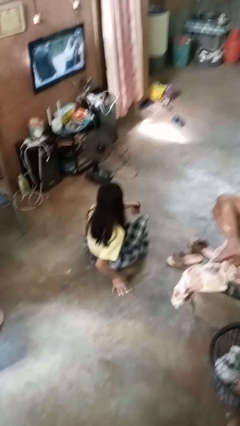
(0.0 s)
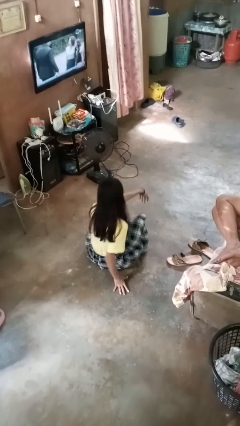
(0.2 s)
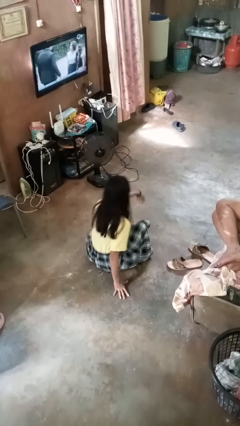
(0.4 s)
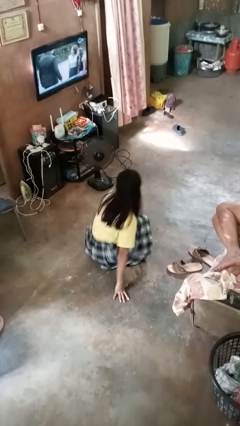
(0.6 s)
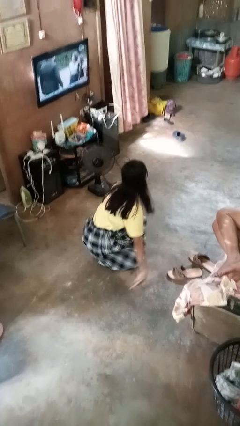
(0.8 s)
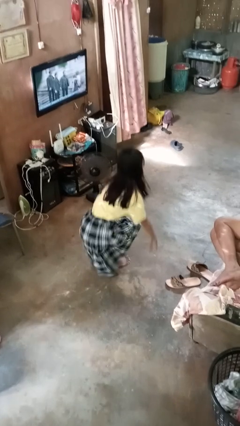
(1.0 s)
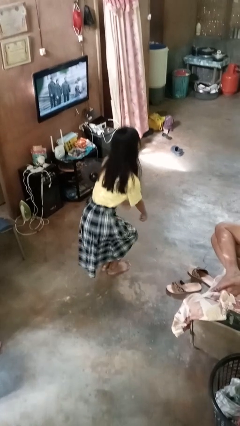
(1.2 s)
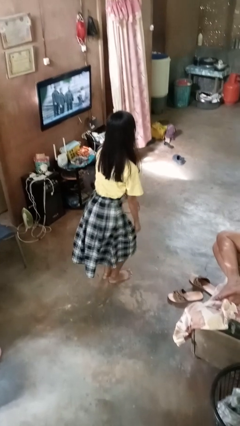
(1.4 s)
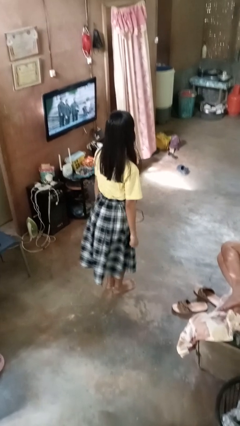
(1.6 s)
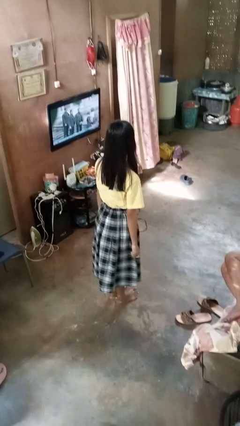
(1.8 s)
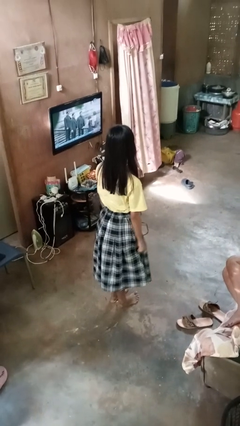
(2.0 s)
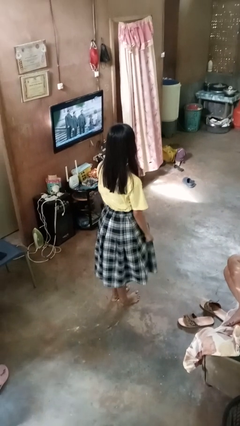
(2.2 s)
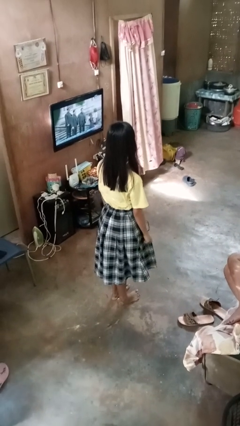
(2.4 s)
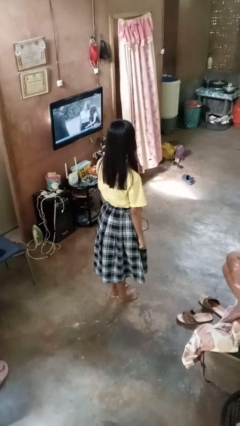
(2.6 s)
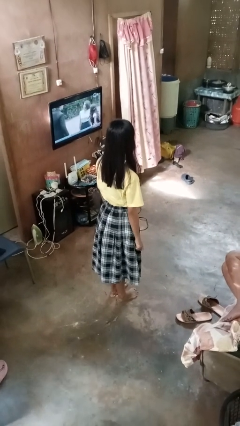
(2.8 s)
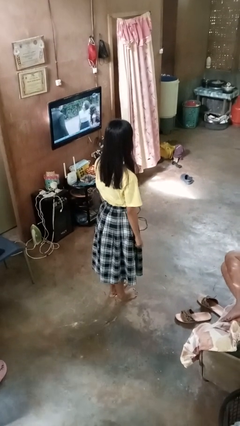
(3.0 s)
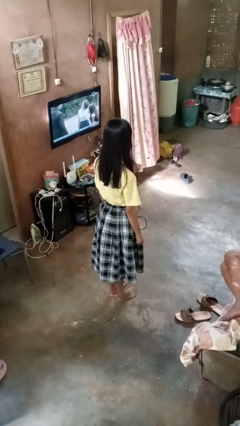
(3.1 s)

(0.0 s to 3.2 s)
person stands up from floor

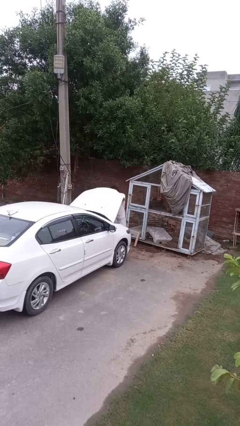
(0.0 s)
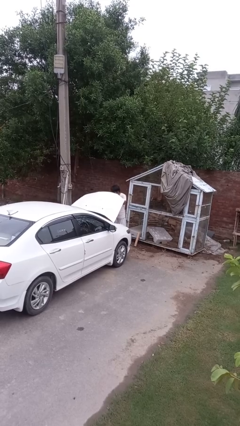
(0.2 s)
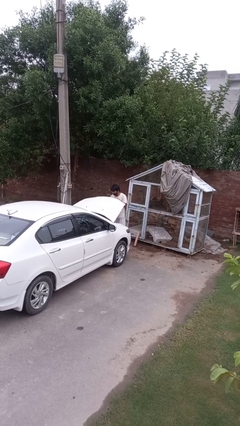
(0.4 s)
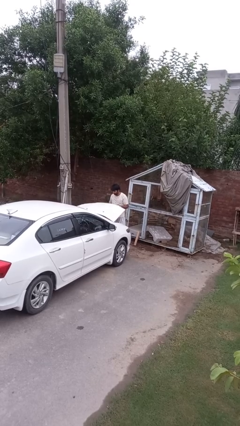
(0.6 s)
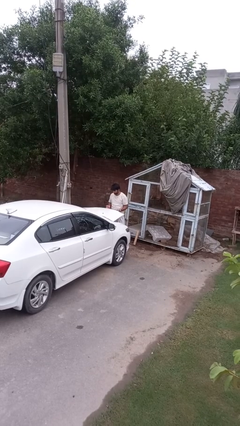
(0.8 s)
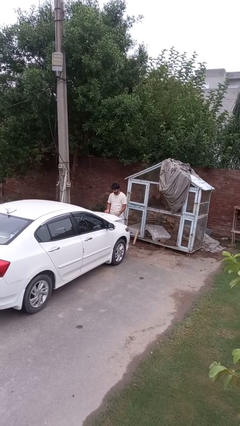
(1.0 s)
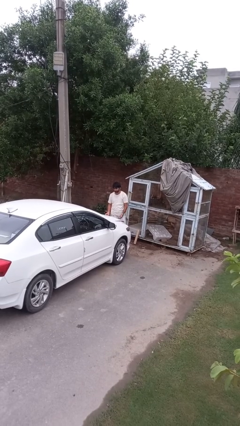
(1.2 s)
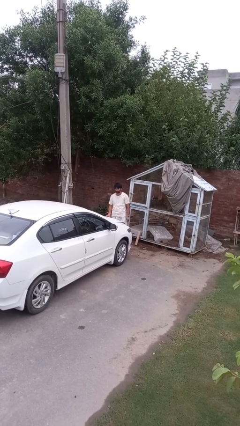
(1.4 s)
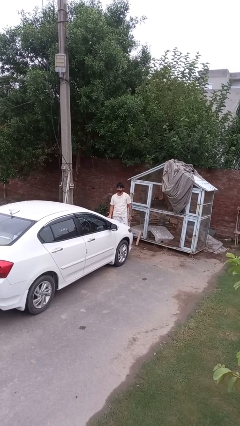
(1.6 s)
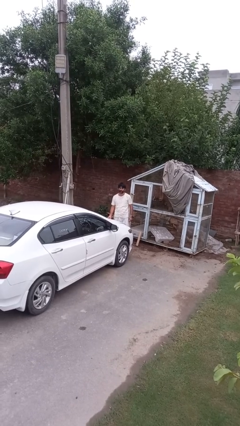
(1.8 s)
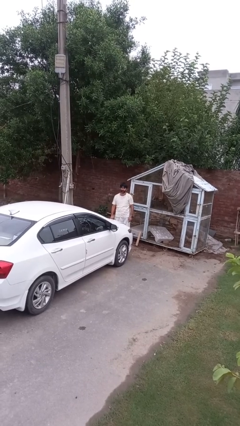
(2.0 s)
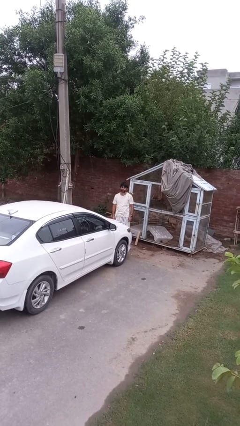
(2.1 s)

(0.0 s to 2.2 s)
person closes car hood

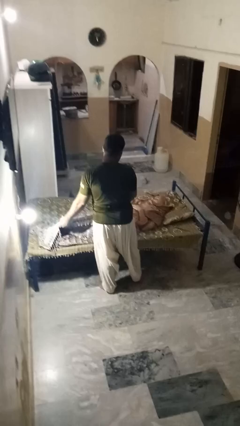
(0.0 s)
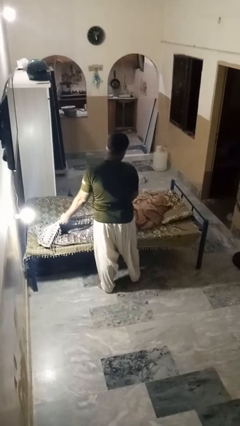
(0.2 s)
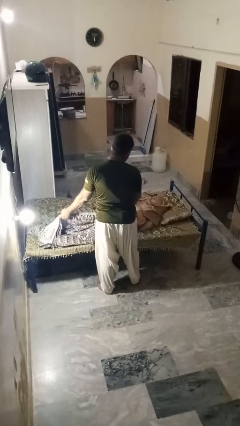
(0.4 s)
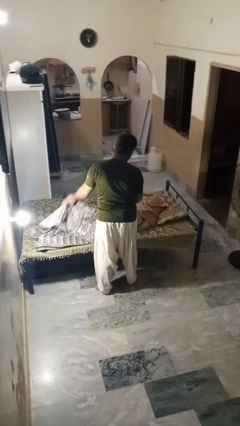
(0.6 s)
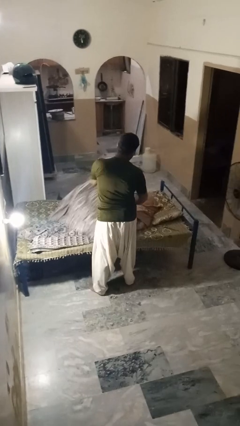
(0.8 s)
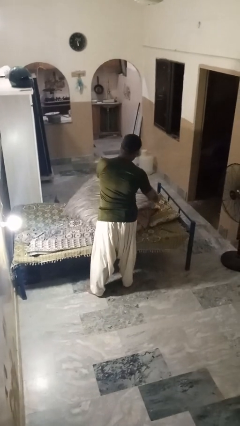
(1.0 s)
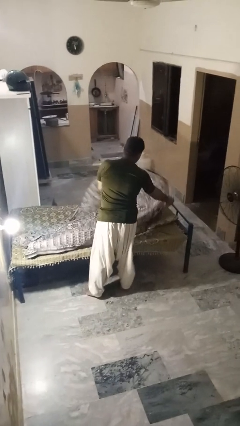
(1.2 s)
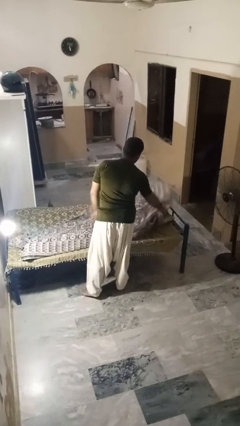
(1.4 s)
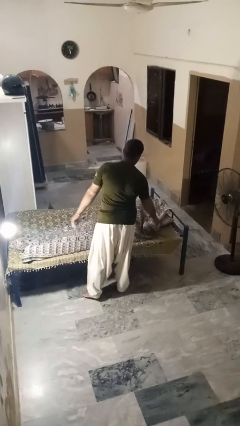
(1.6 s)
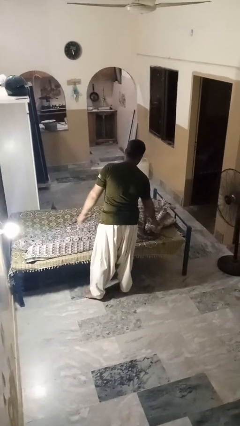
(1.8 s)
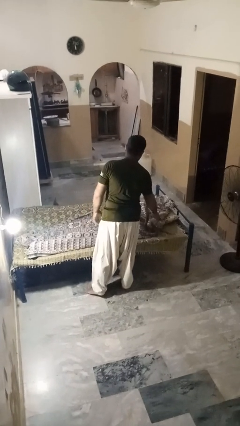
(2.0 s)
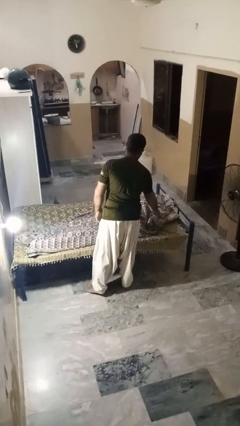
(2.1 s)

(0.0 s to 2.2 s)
person covers friend with blanket

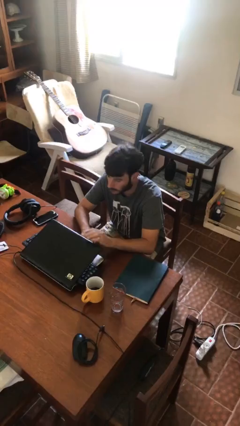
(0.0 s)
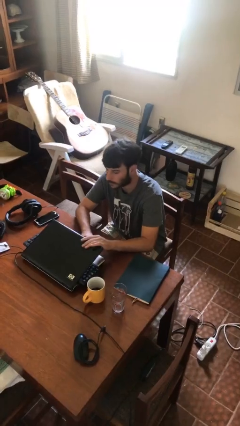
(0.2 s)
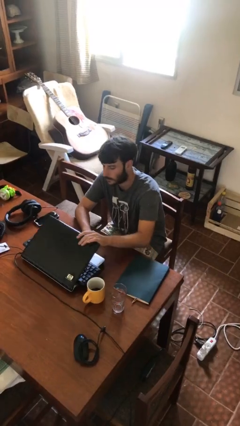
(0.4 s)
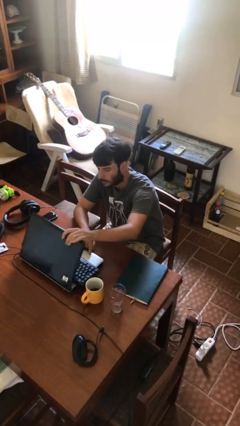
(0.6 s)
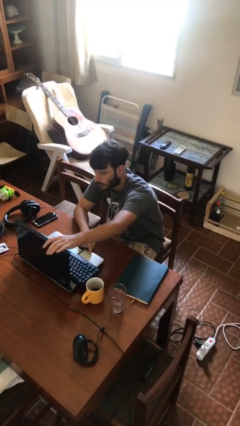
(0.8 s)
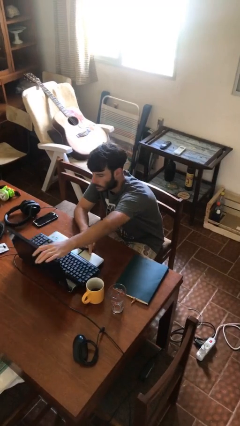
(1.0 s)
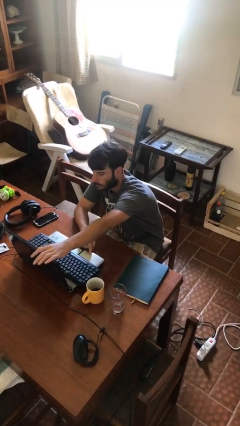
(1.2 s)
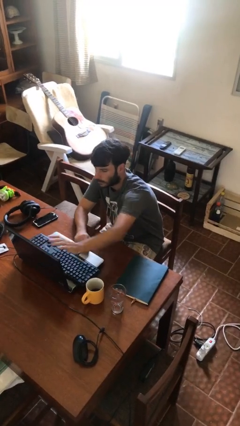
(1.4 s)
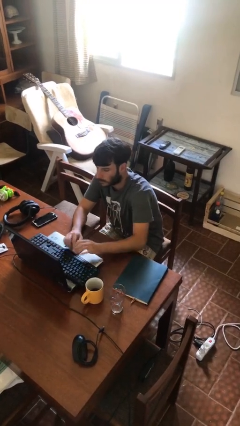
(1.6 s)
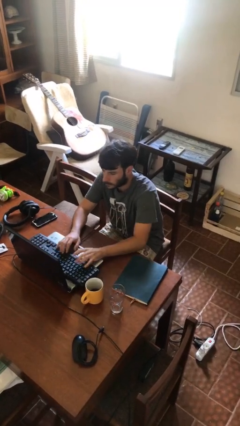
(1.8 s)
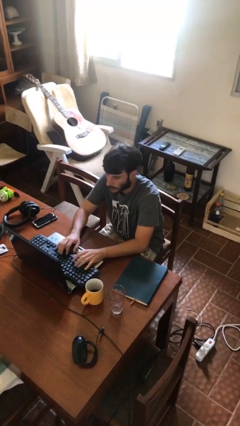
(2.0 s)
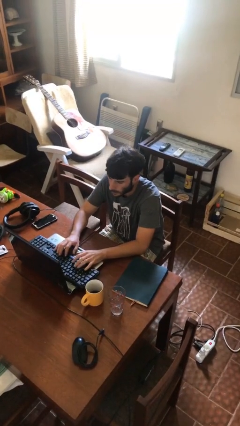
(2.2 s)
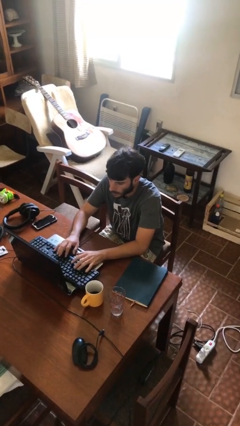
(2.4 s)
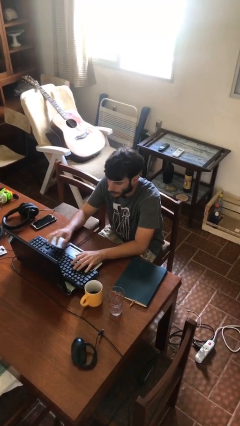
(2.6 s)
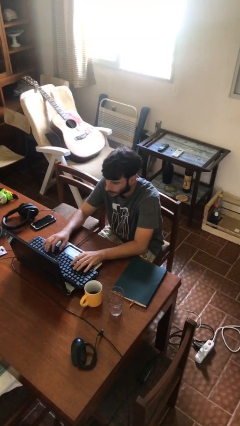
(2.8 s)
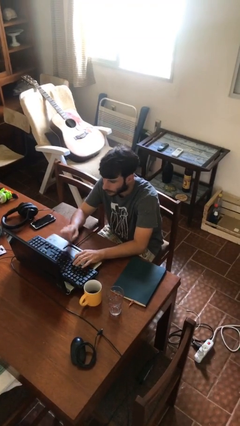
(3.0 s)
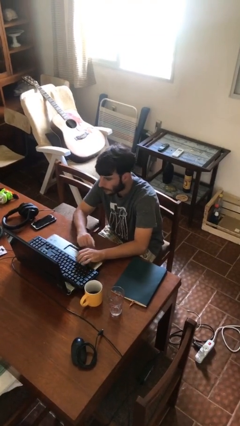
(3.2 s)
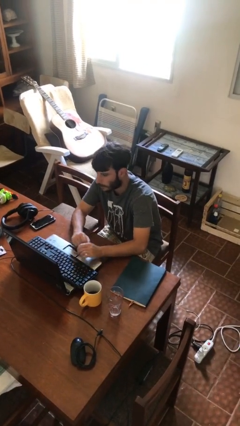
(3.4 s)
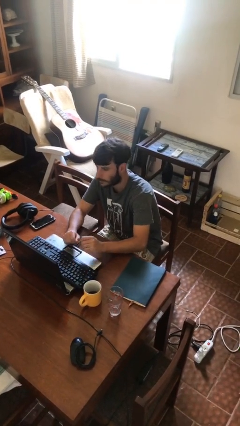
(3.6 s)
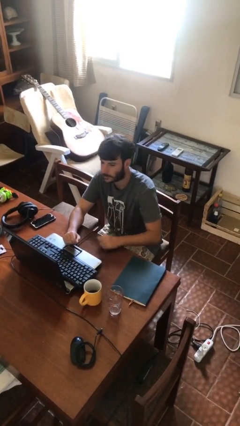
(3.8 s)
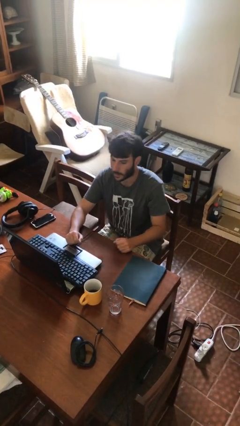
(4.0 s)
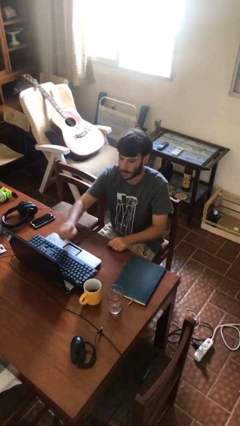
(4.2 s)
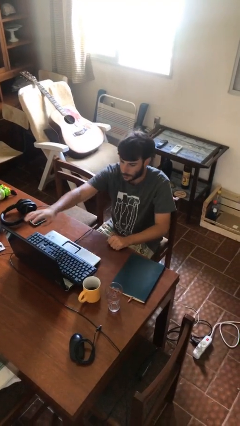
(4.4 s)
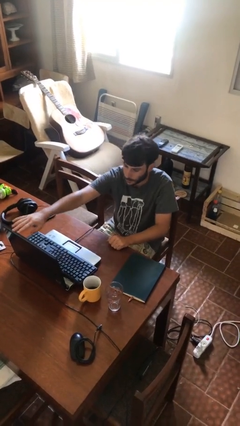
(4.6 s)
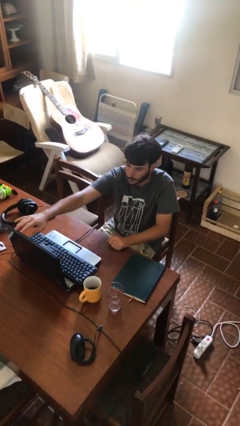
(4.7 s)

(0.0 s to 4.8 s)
person interacts with laptop

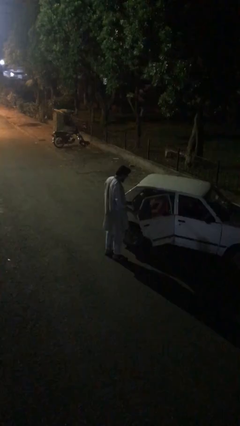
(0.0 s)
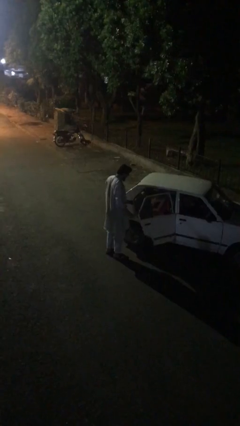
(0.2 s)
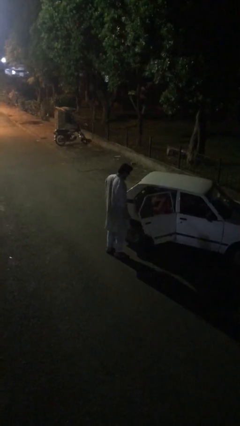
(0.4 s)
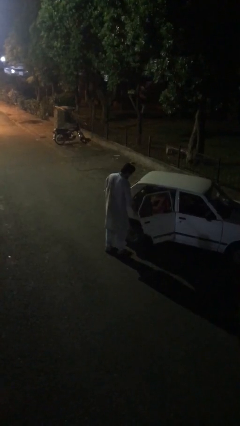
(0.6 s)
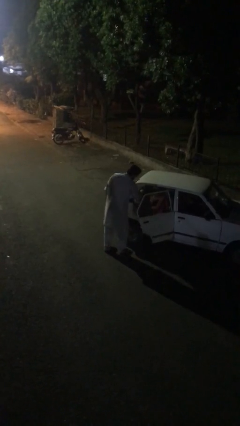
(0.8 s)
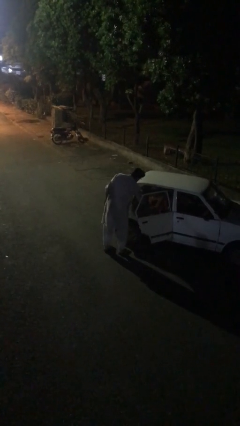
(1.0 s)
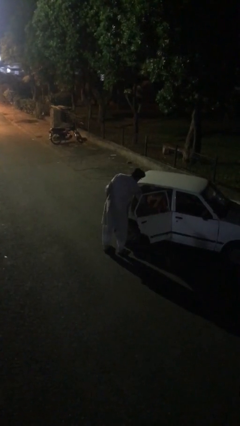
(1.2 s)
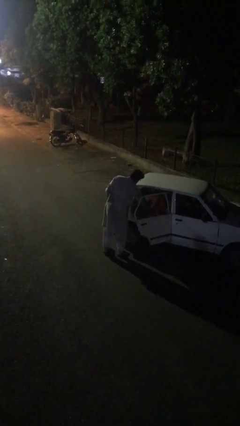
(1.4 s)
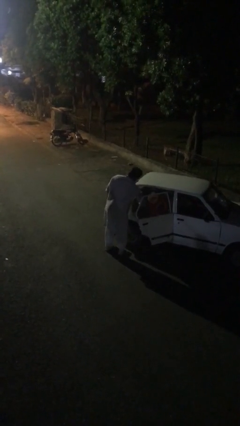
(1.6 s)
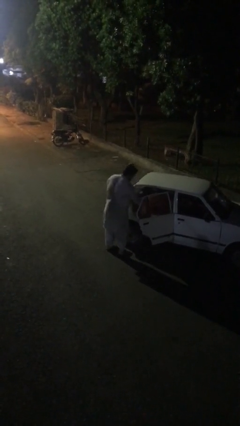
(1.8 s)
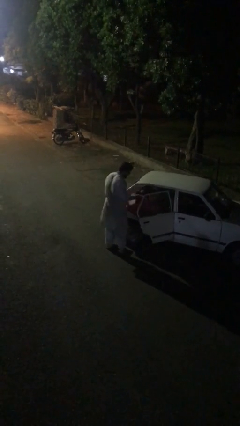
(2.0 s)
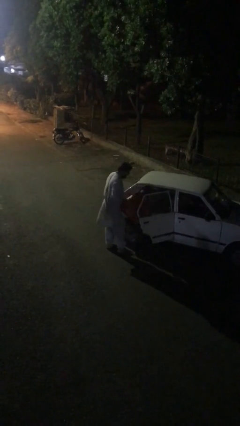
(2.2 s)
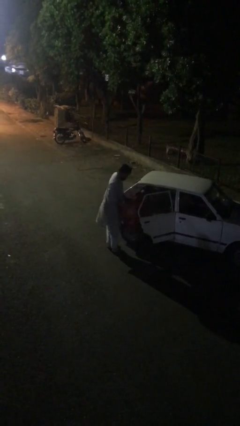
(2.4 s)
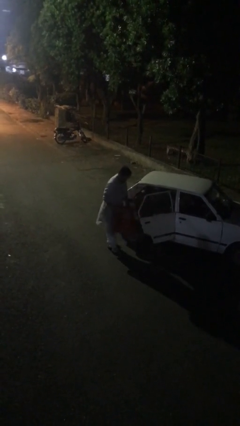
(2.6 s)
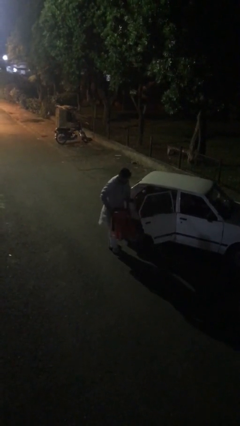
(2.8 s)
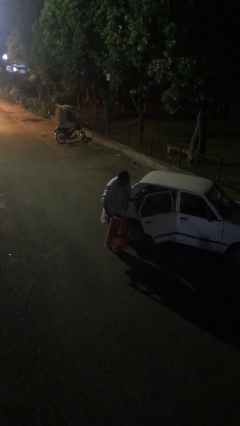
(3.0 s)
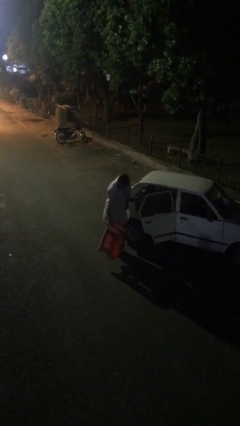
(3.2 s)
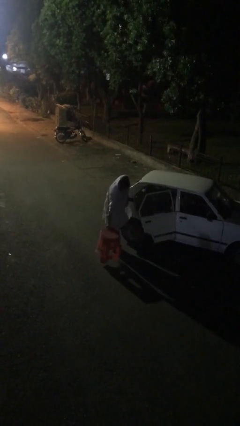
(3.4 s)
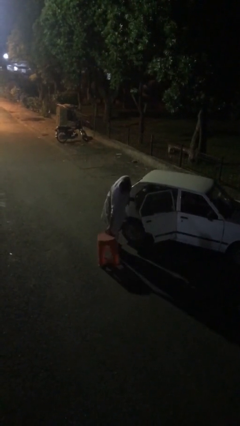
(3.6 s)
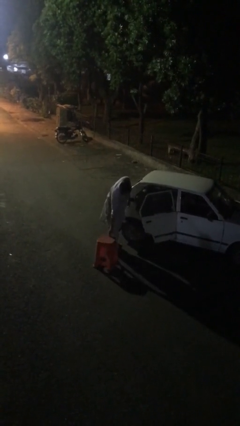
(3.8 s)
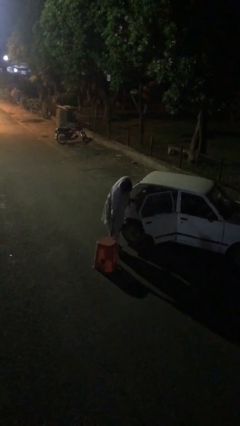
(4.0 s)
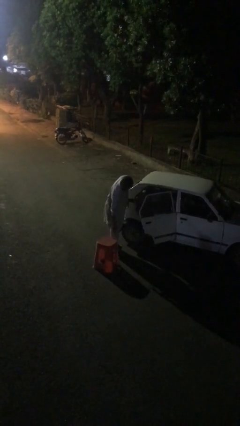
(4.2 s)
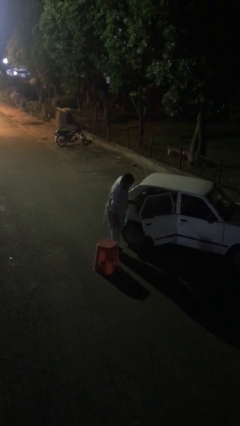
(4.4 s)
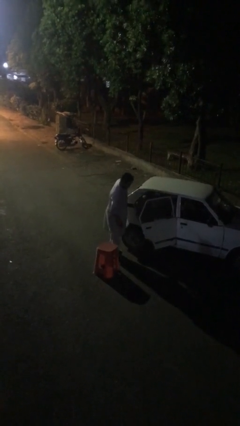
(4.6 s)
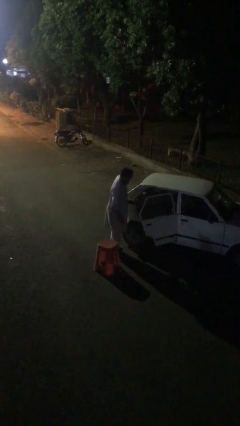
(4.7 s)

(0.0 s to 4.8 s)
person unloads car

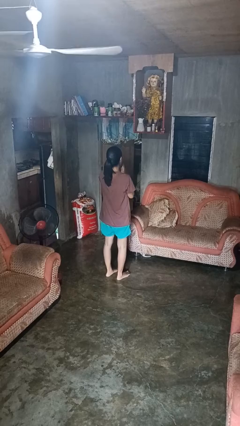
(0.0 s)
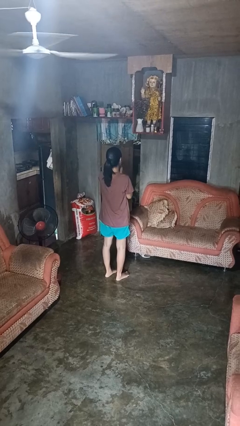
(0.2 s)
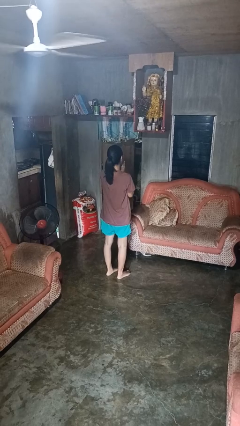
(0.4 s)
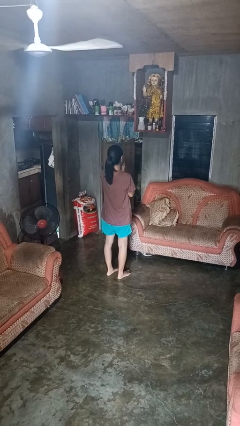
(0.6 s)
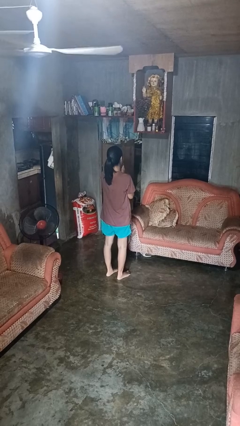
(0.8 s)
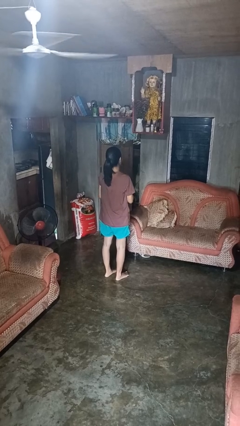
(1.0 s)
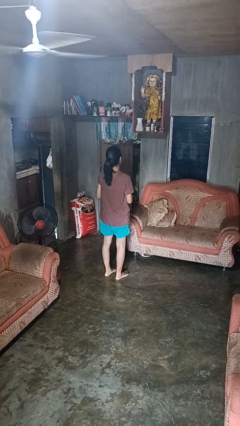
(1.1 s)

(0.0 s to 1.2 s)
person prays
